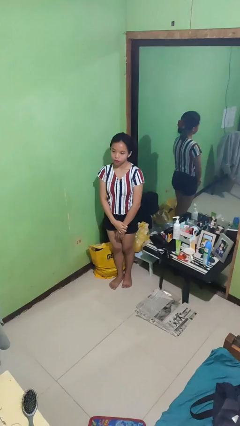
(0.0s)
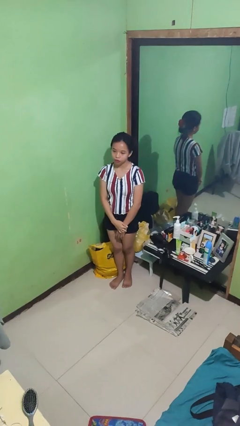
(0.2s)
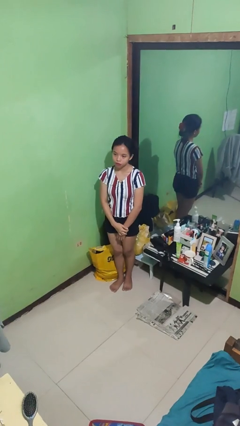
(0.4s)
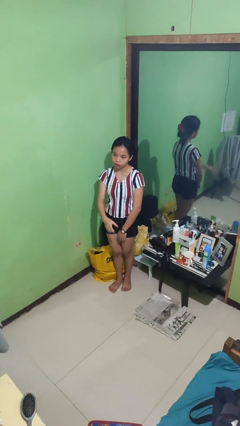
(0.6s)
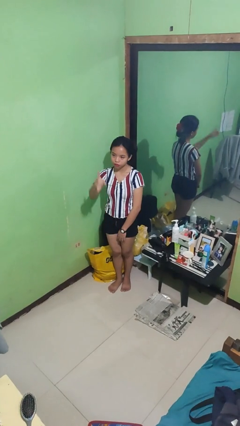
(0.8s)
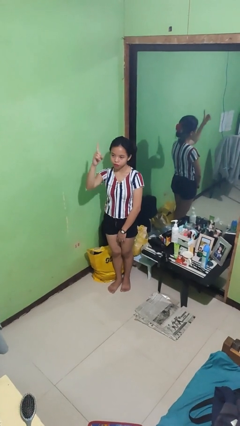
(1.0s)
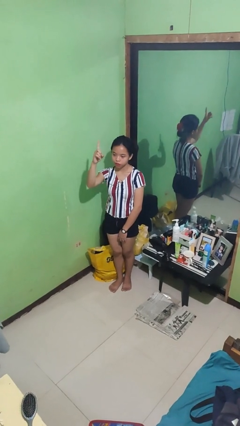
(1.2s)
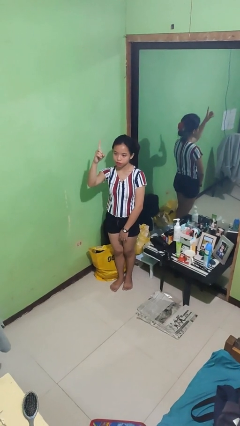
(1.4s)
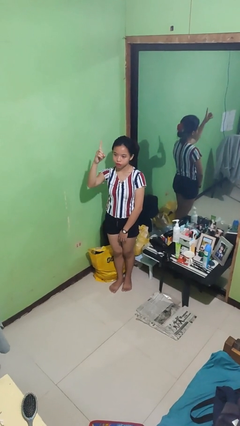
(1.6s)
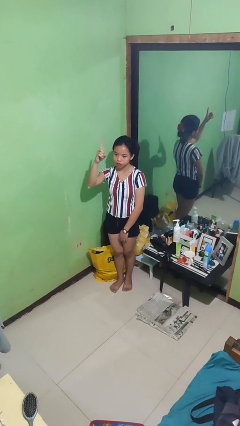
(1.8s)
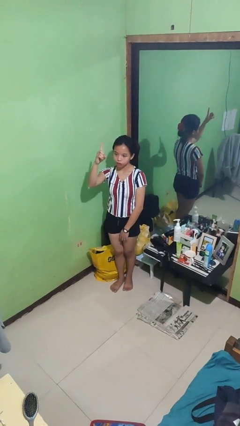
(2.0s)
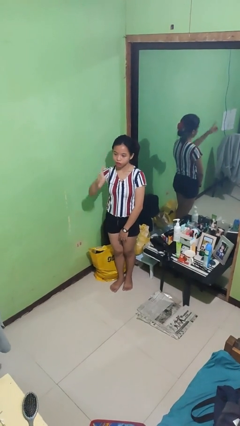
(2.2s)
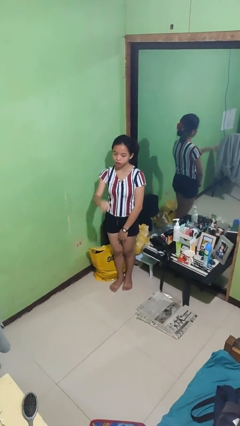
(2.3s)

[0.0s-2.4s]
person gestures number one

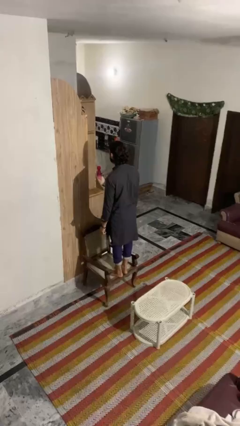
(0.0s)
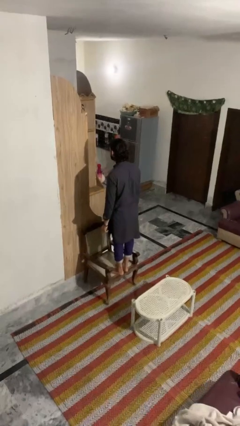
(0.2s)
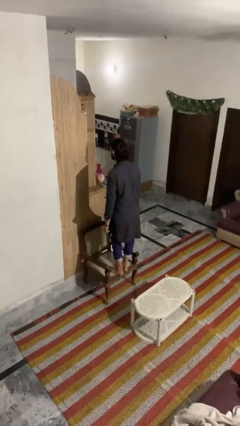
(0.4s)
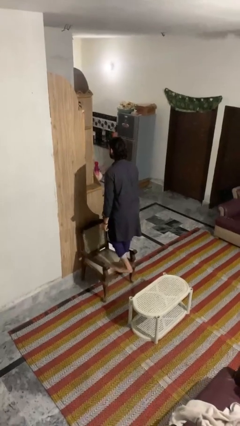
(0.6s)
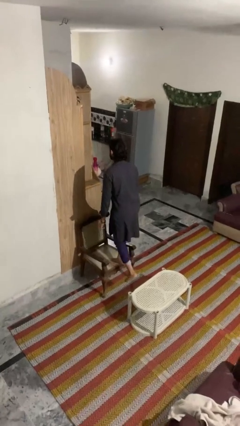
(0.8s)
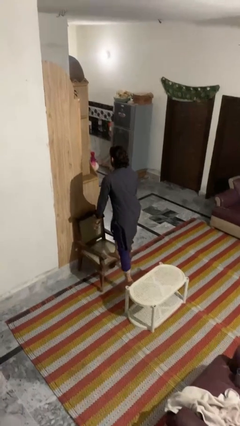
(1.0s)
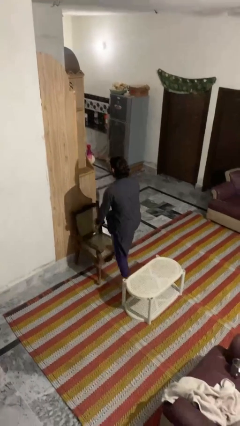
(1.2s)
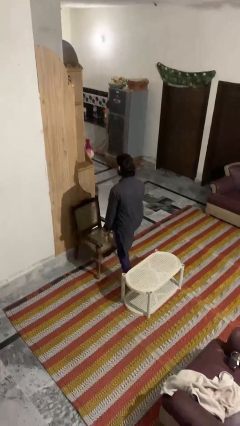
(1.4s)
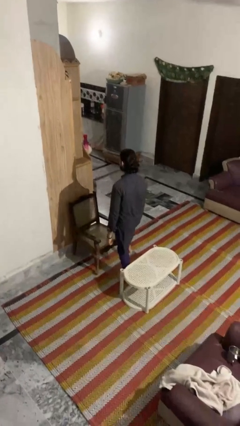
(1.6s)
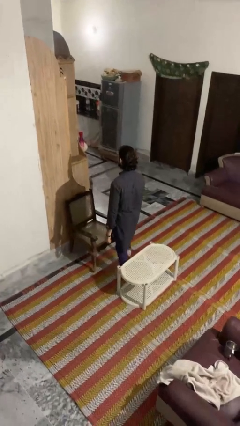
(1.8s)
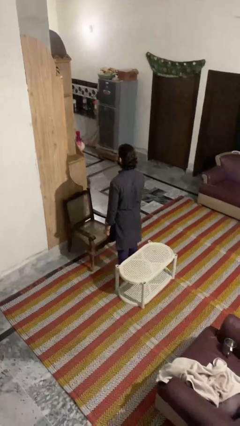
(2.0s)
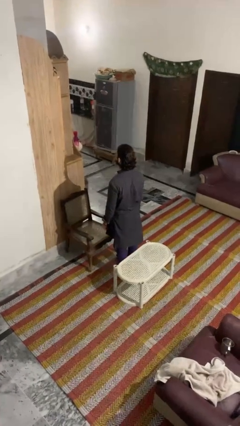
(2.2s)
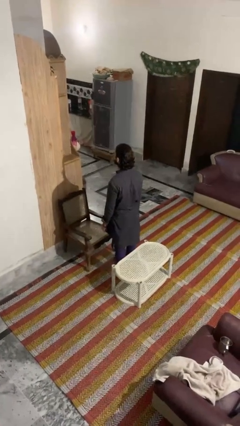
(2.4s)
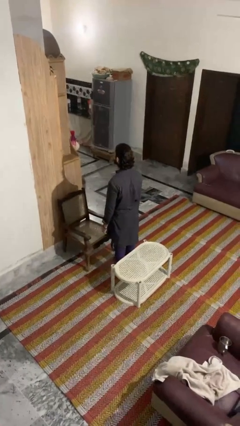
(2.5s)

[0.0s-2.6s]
person climbs off chair

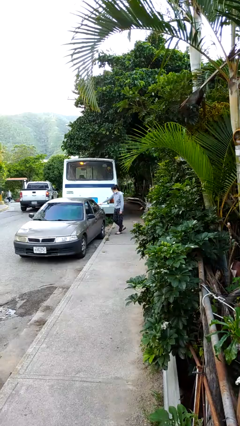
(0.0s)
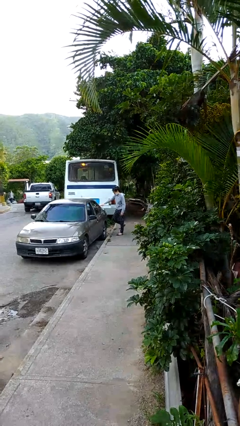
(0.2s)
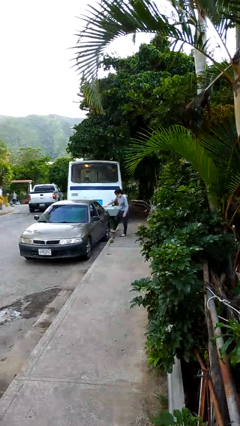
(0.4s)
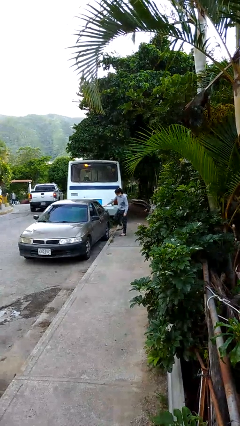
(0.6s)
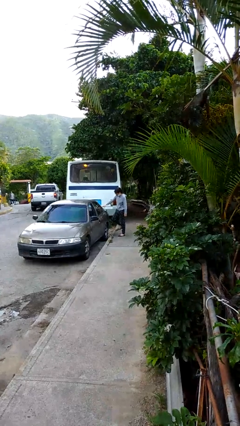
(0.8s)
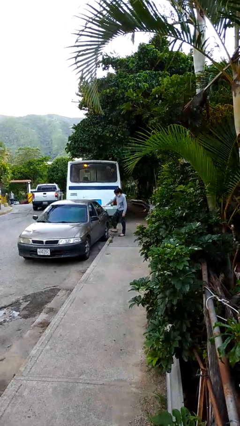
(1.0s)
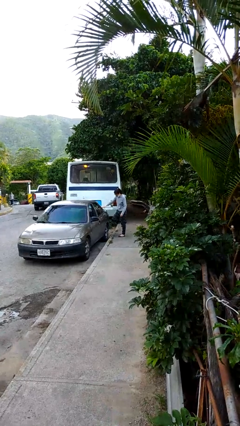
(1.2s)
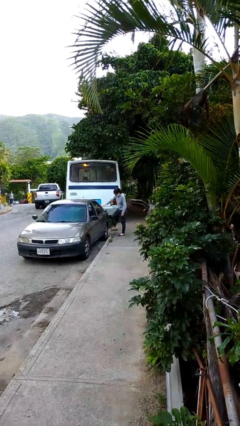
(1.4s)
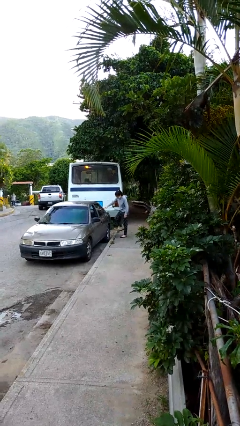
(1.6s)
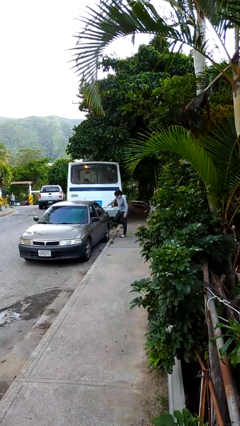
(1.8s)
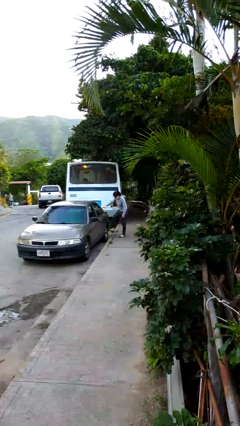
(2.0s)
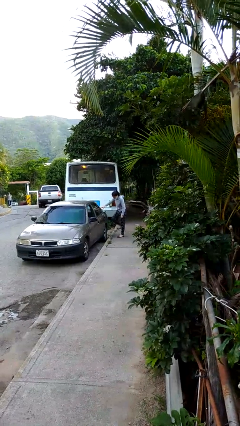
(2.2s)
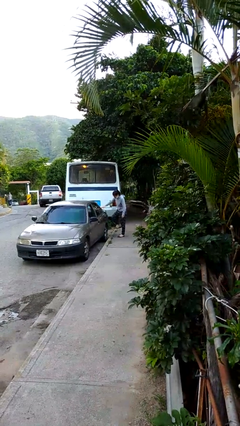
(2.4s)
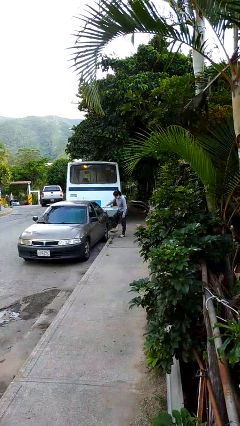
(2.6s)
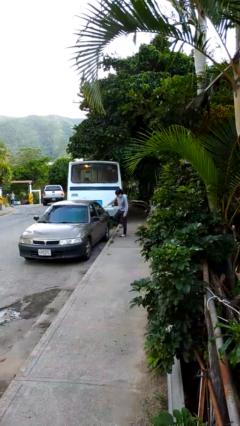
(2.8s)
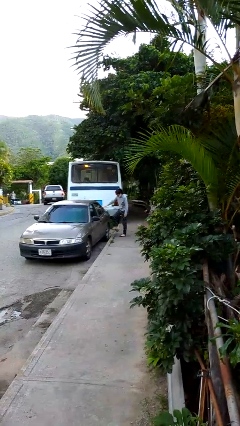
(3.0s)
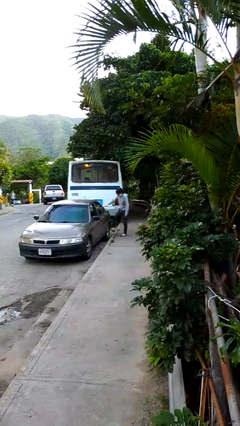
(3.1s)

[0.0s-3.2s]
person kicks car tires

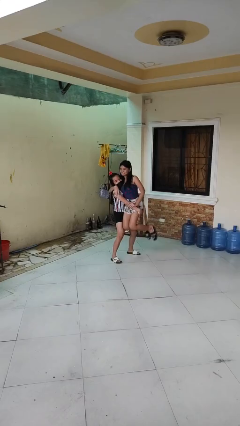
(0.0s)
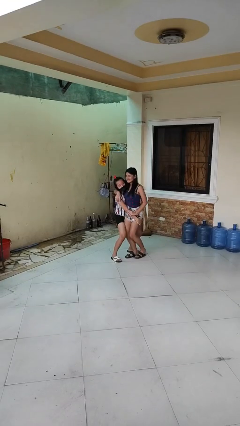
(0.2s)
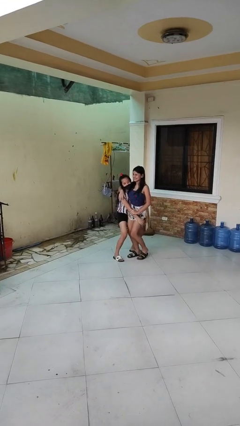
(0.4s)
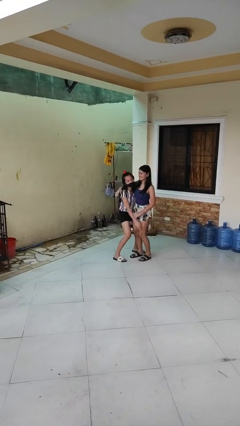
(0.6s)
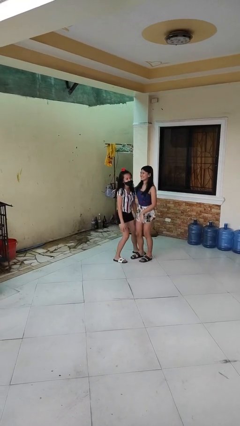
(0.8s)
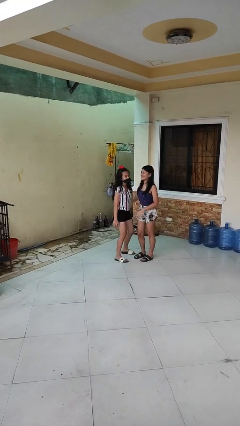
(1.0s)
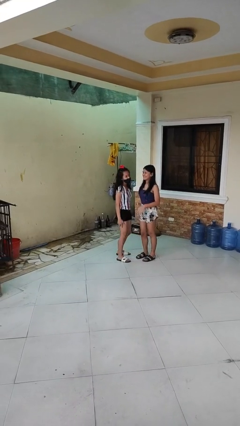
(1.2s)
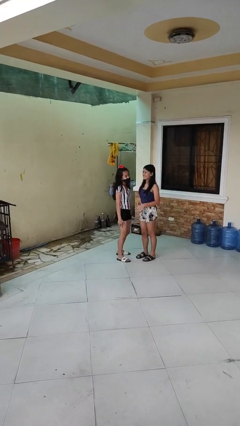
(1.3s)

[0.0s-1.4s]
person puts down person

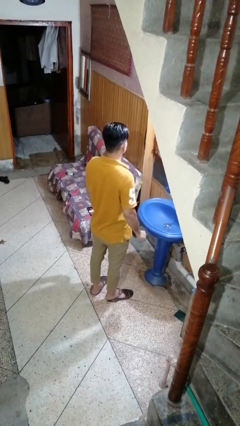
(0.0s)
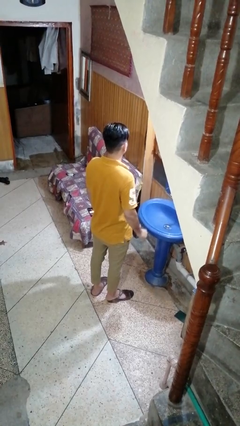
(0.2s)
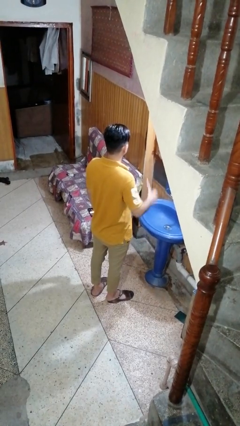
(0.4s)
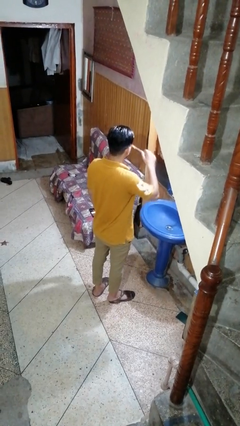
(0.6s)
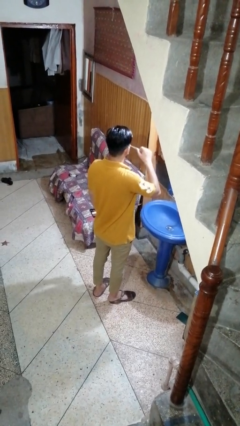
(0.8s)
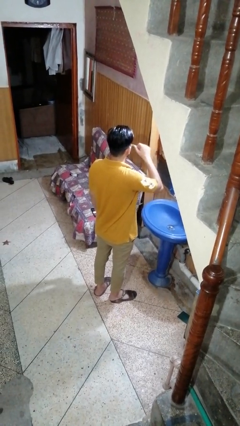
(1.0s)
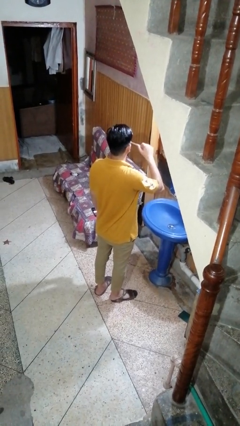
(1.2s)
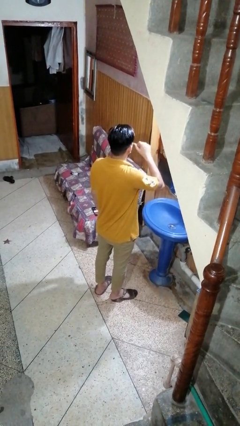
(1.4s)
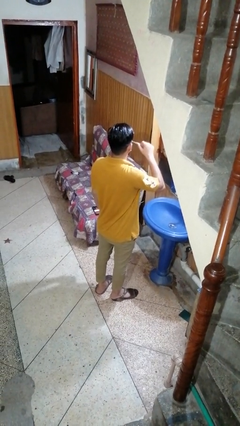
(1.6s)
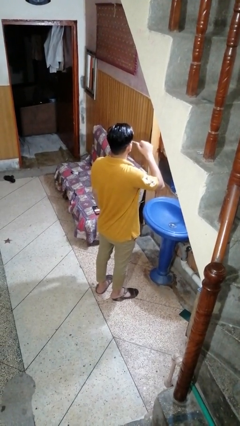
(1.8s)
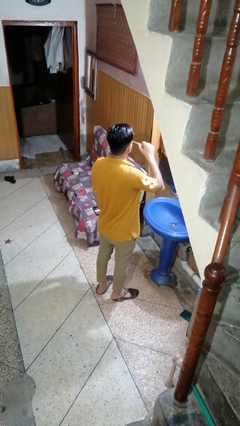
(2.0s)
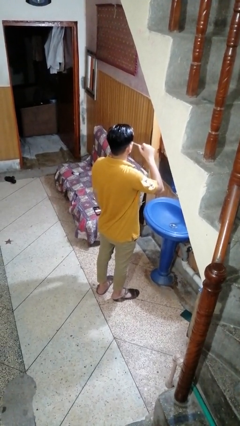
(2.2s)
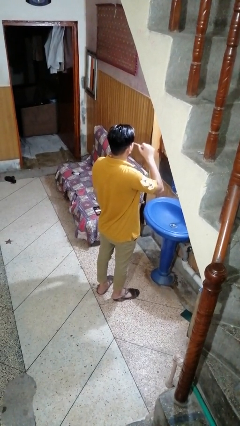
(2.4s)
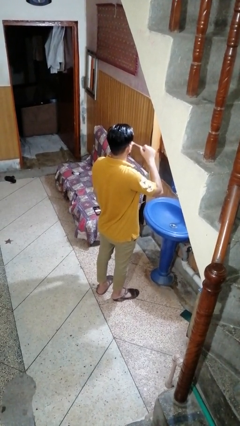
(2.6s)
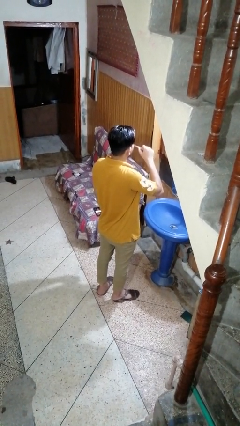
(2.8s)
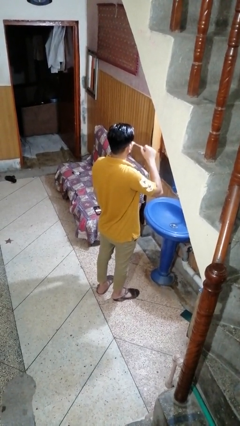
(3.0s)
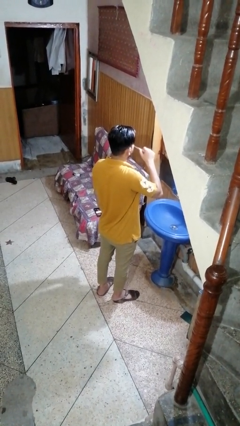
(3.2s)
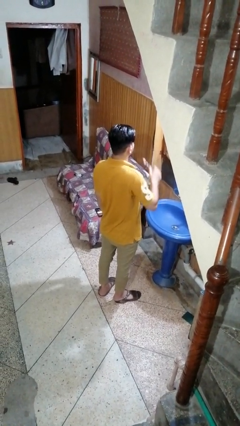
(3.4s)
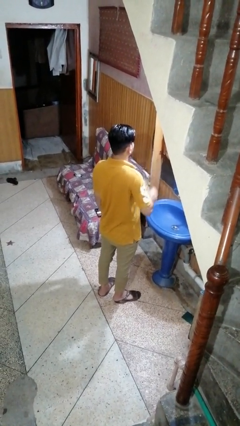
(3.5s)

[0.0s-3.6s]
person brushes teeth

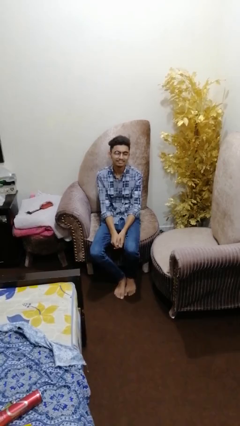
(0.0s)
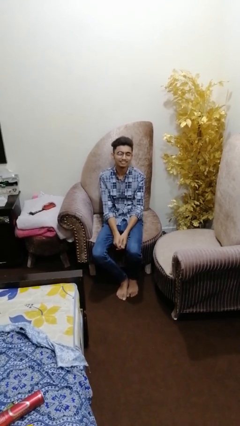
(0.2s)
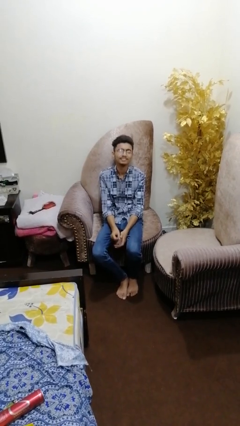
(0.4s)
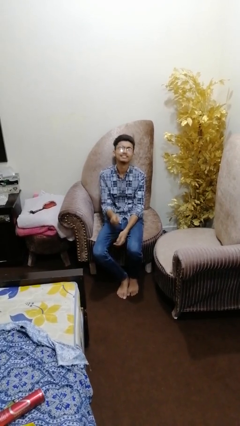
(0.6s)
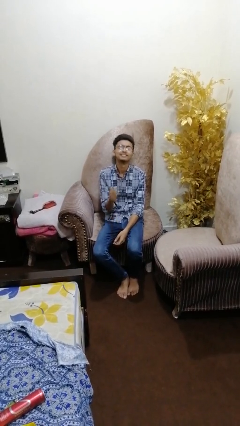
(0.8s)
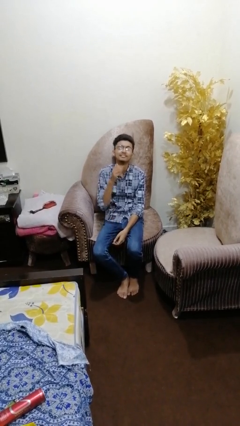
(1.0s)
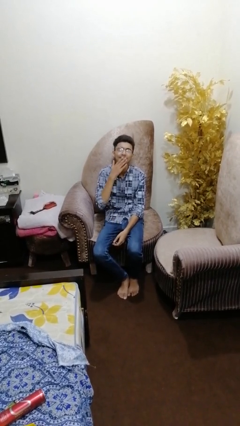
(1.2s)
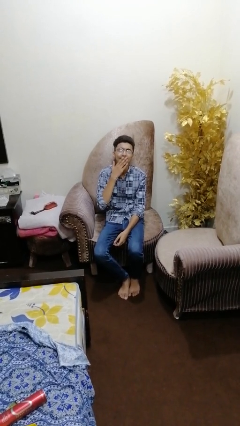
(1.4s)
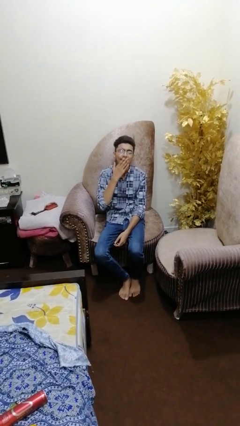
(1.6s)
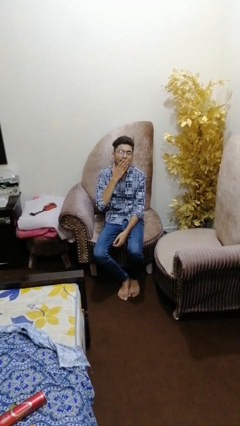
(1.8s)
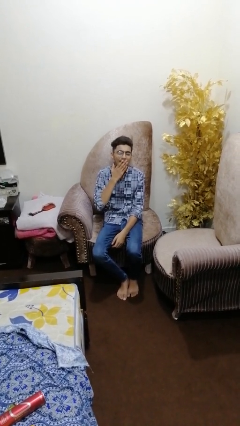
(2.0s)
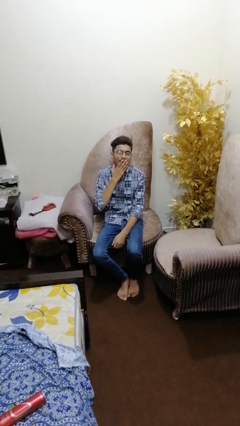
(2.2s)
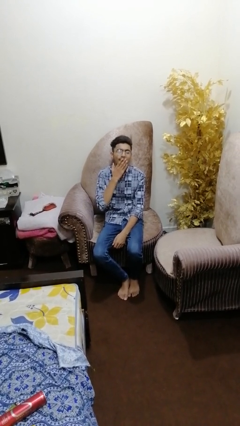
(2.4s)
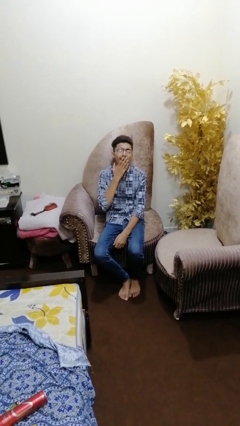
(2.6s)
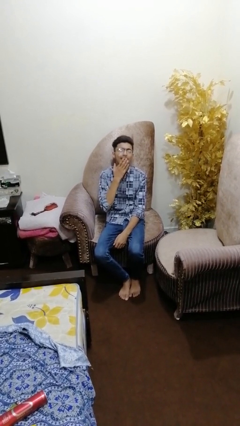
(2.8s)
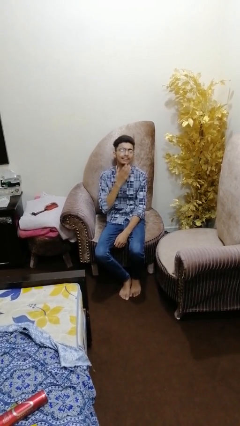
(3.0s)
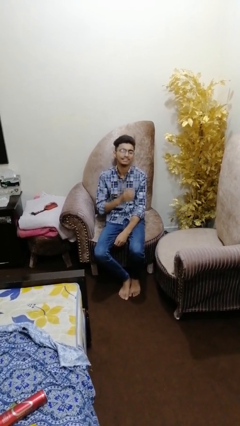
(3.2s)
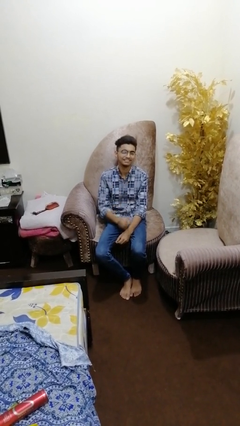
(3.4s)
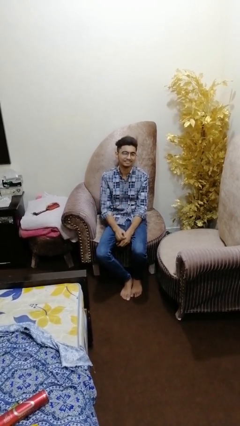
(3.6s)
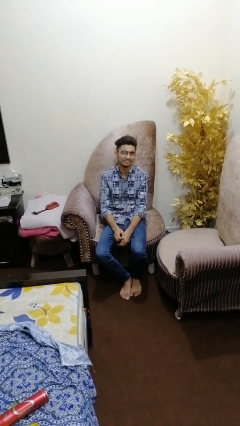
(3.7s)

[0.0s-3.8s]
person yawns

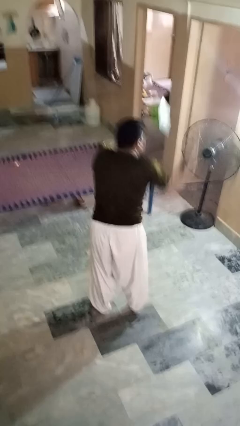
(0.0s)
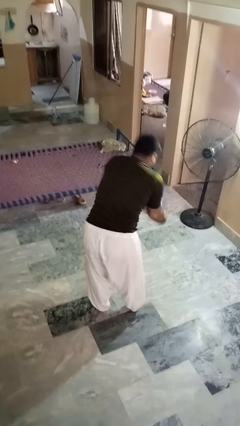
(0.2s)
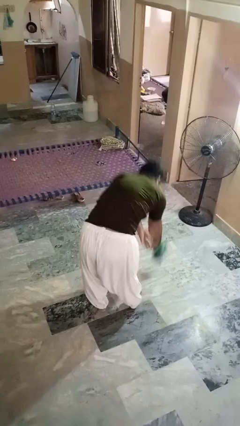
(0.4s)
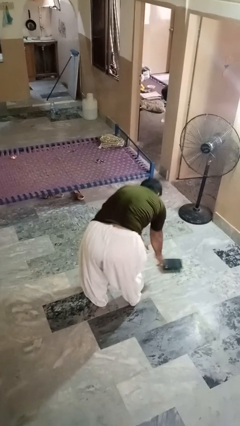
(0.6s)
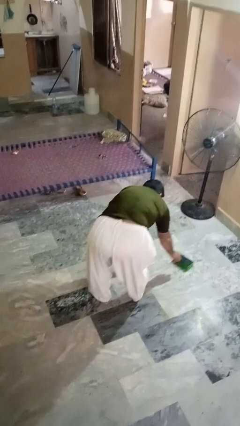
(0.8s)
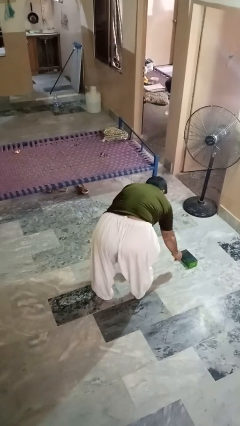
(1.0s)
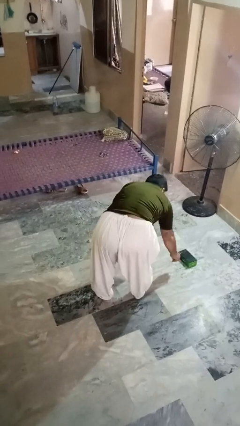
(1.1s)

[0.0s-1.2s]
person catches dropped object
